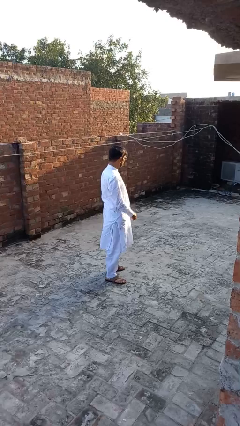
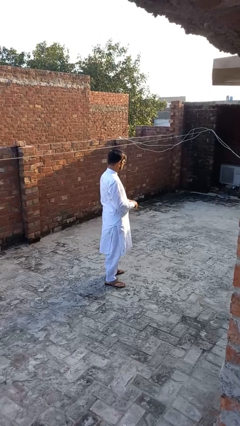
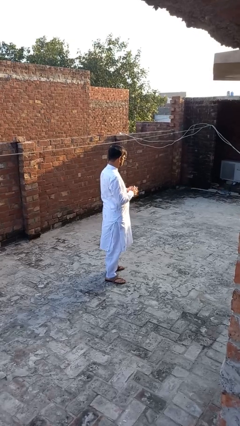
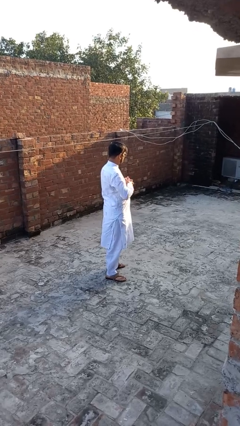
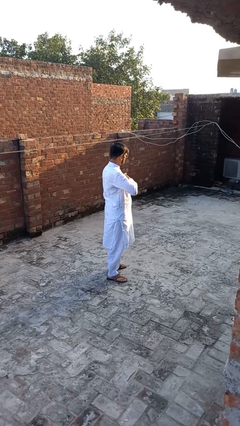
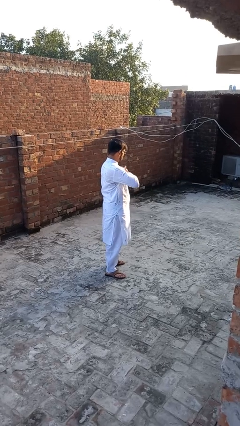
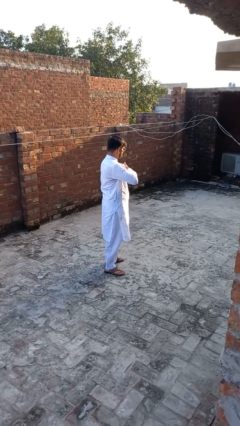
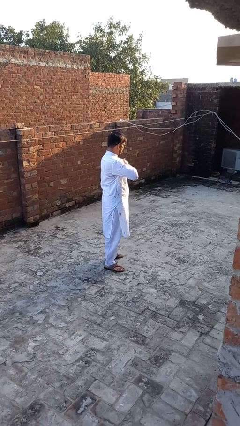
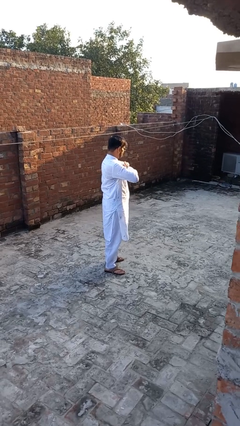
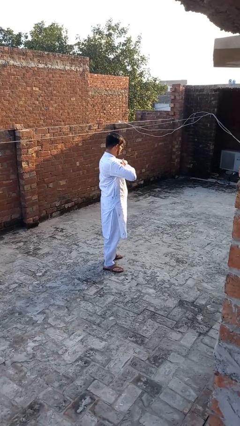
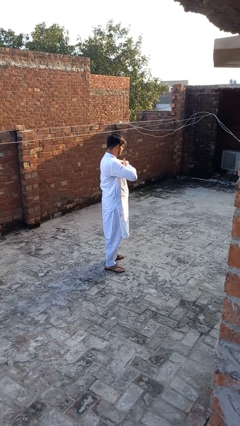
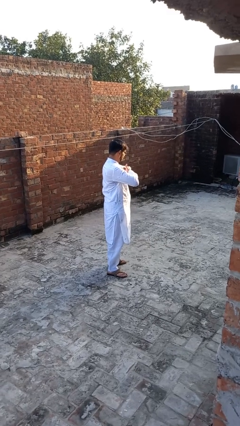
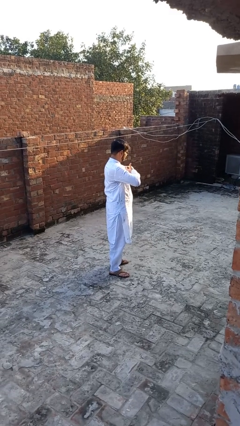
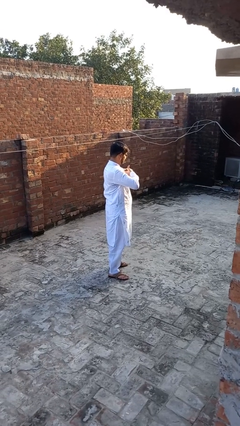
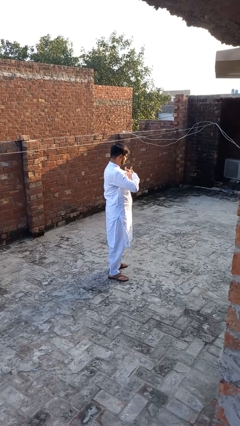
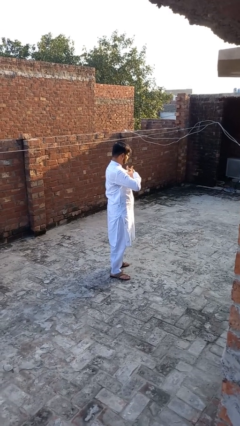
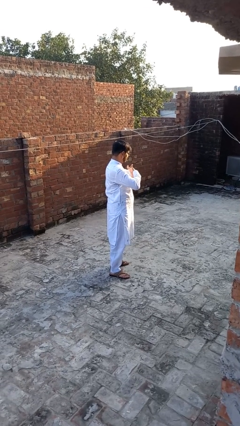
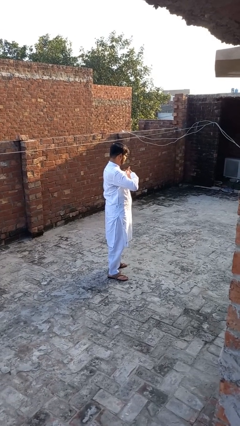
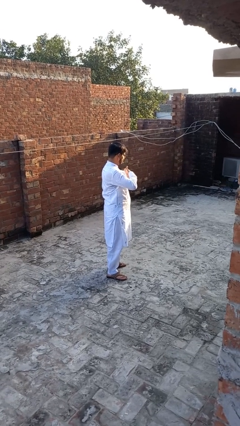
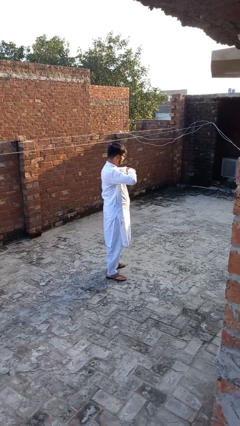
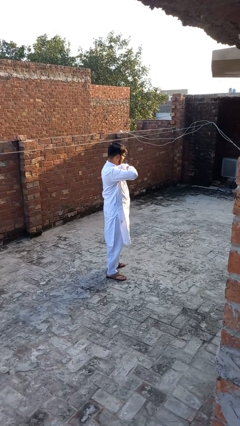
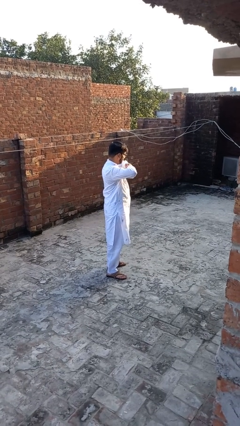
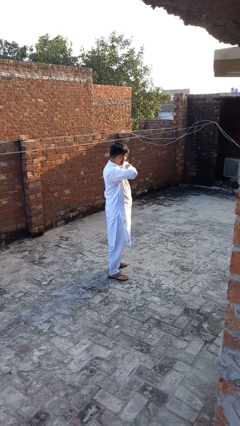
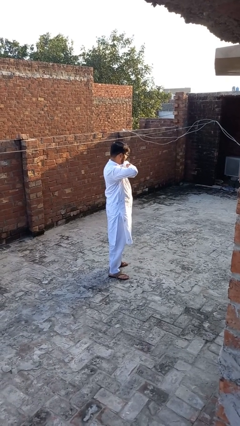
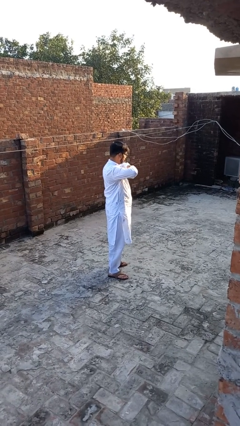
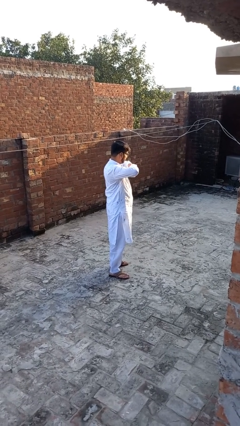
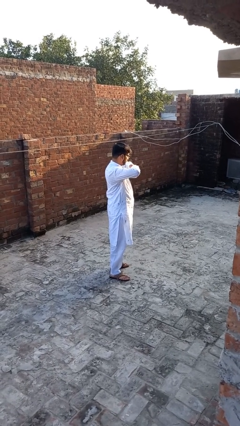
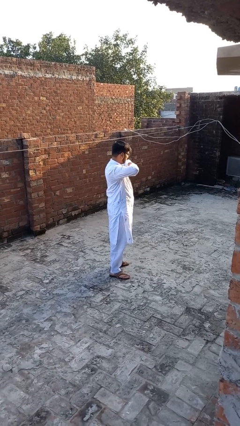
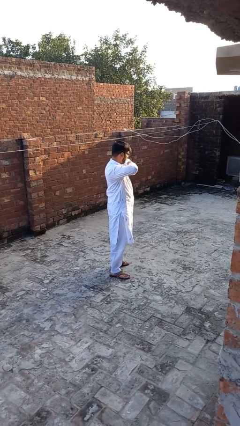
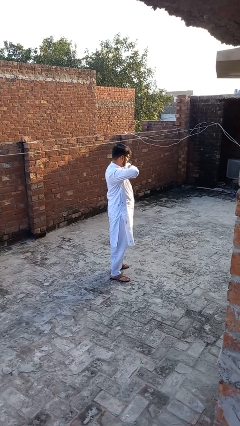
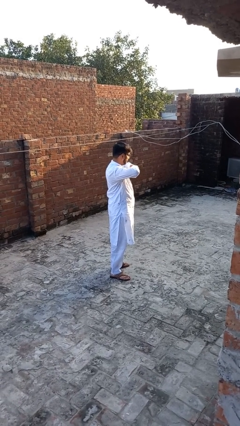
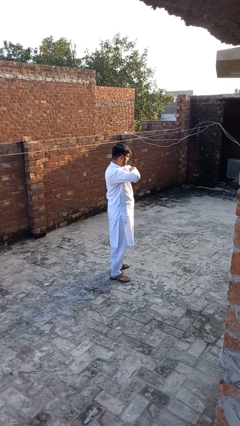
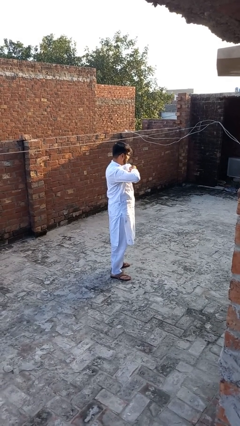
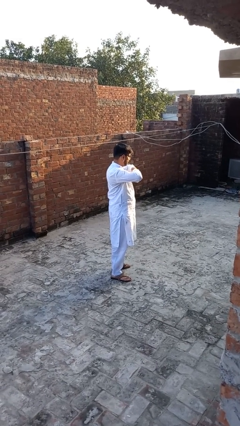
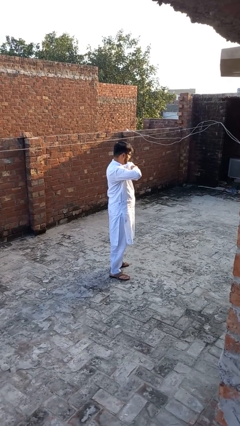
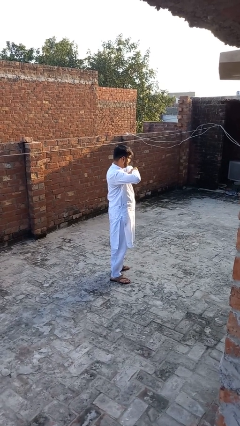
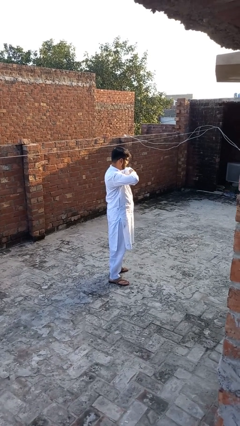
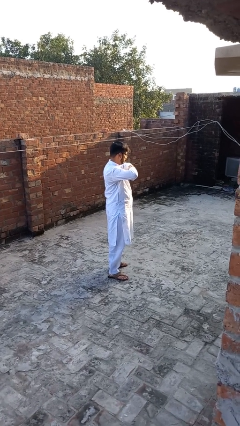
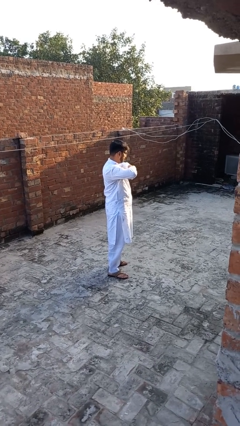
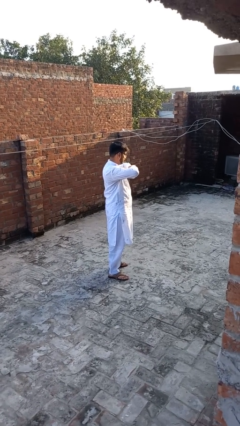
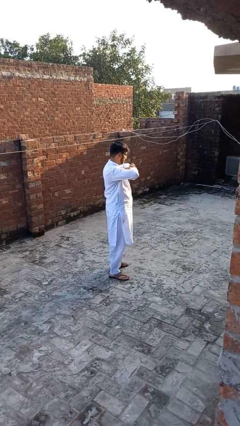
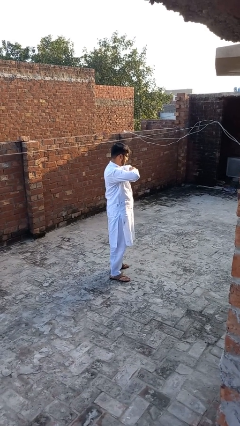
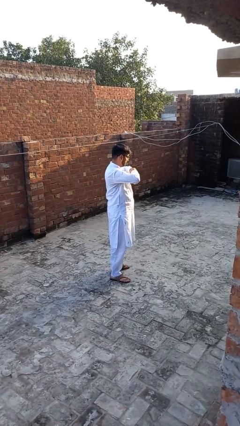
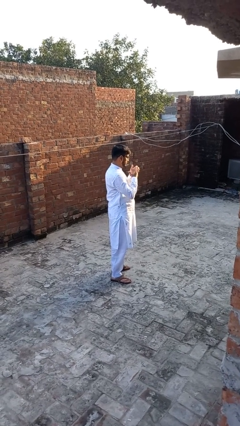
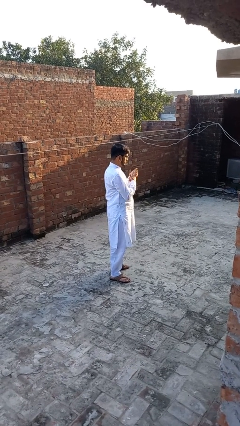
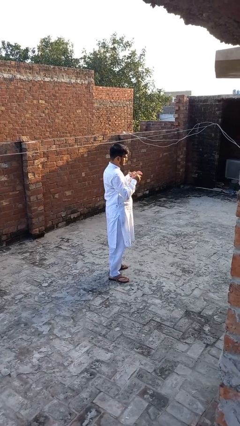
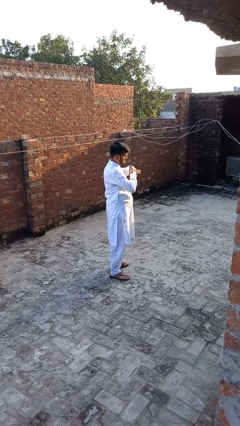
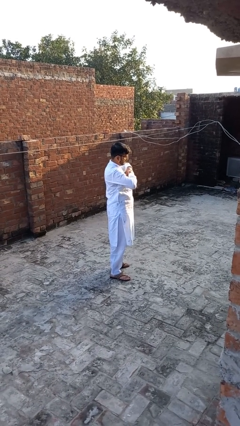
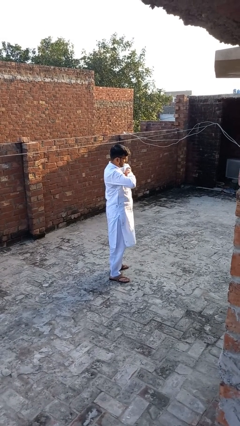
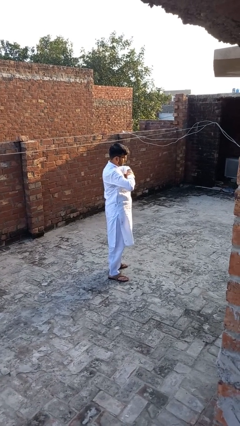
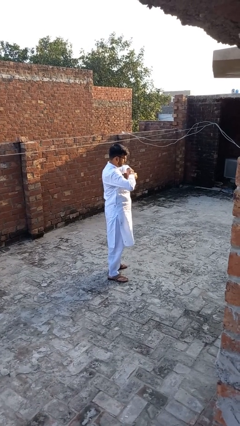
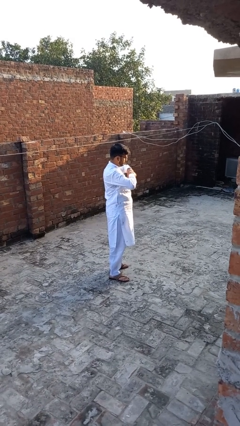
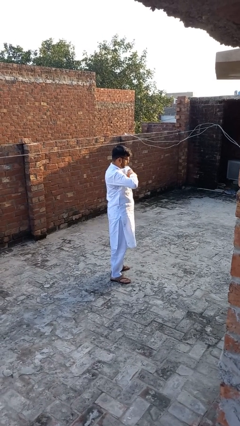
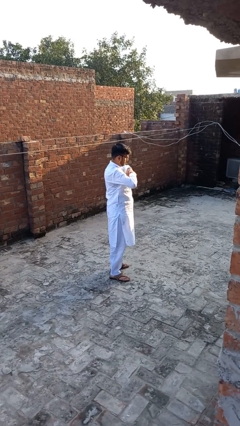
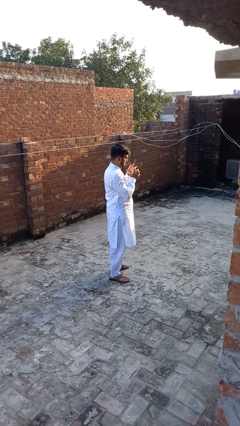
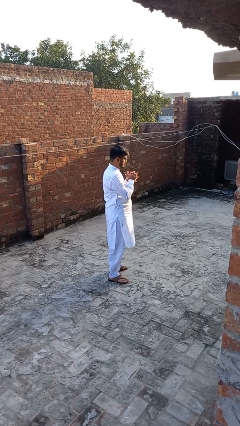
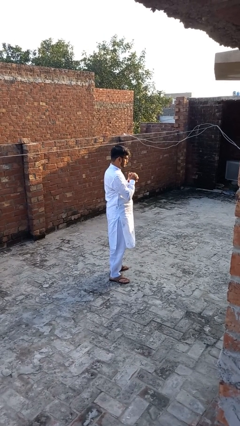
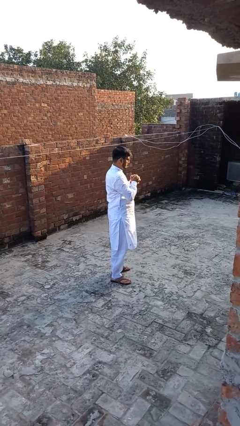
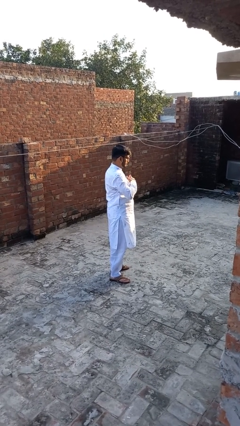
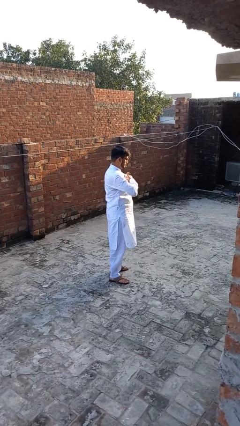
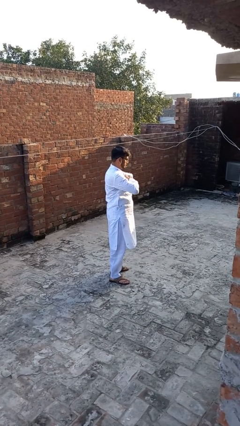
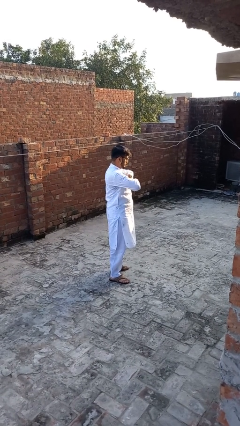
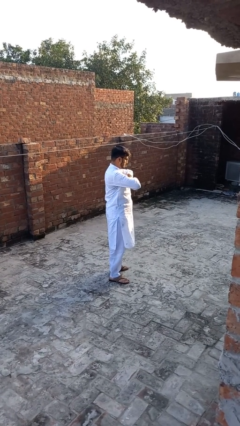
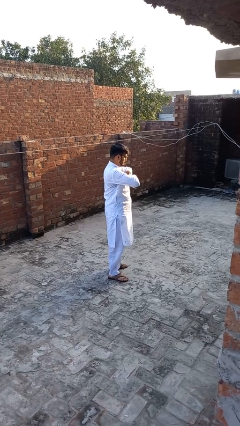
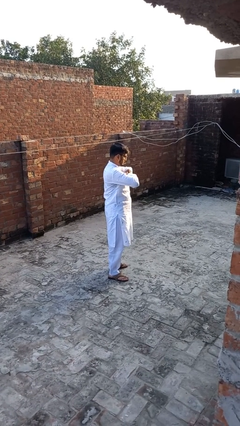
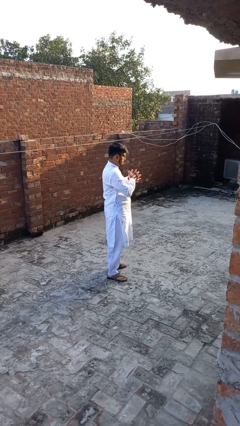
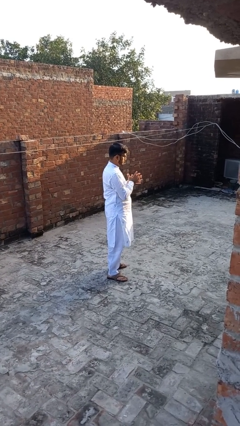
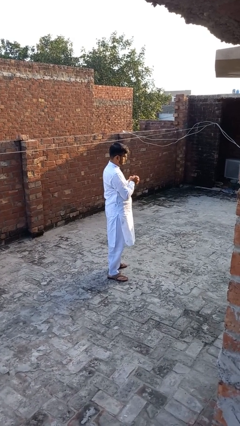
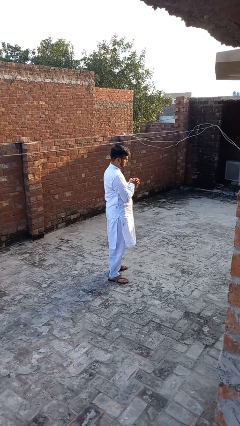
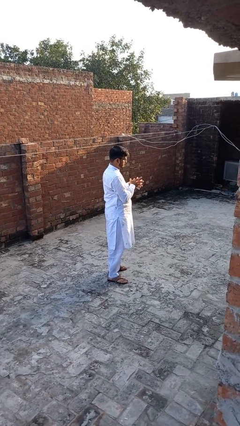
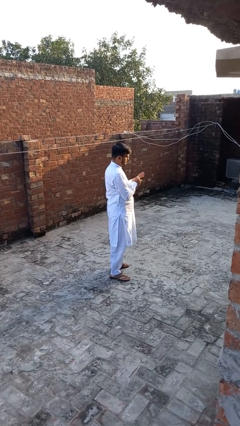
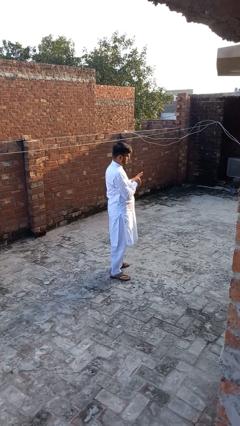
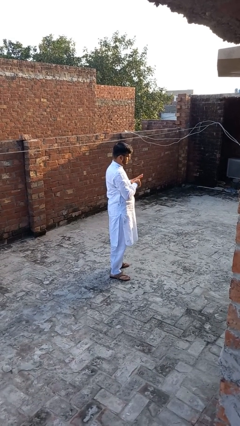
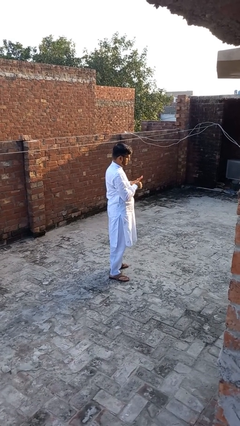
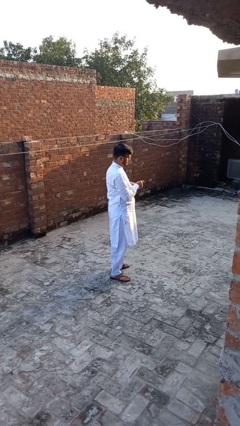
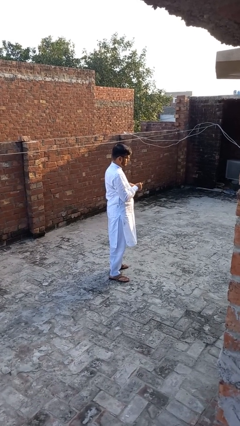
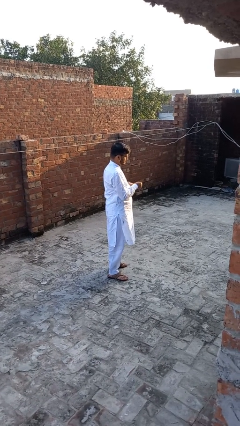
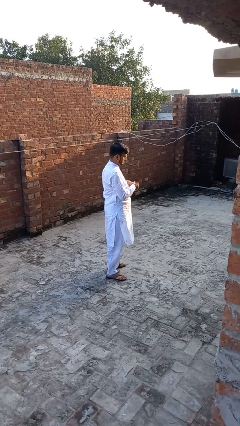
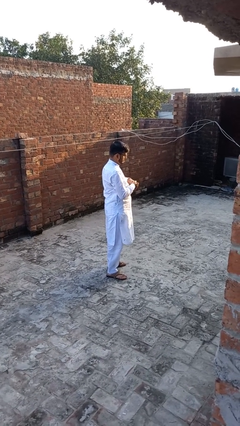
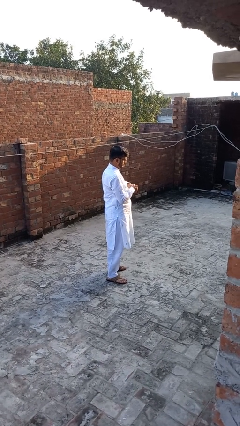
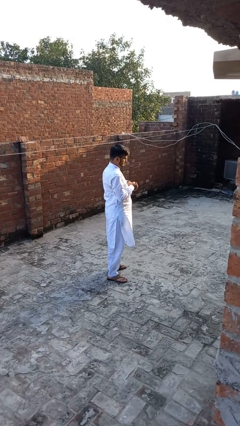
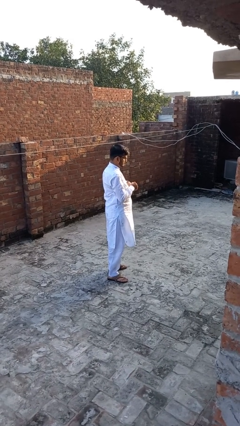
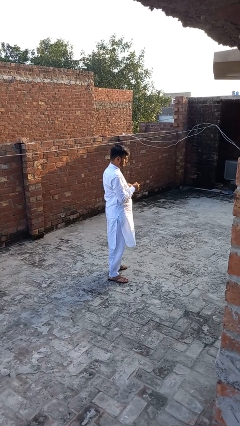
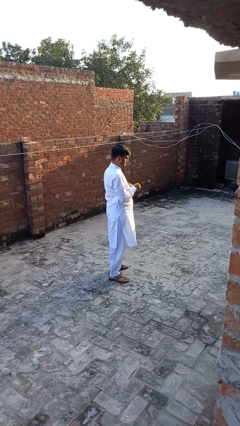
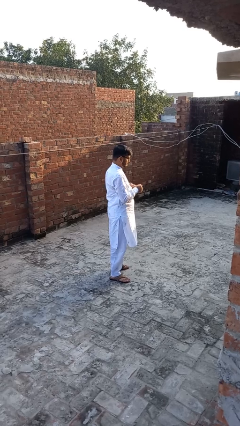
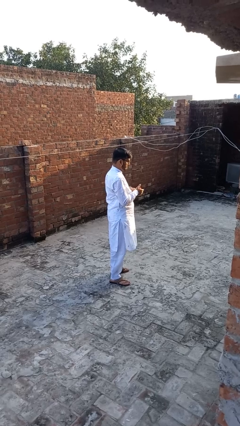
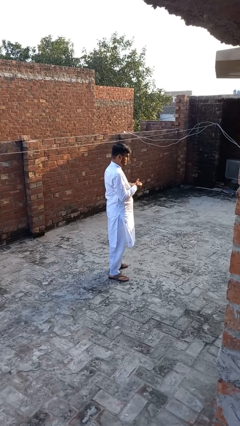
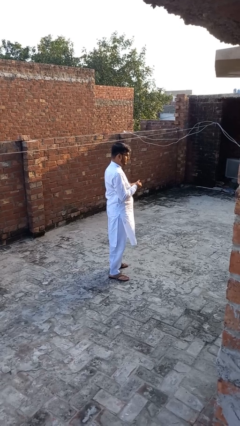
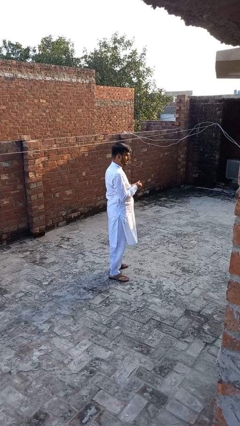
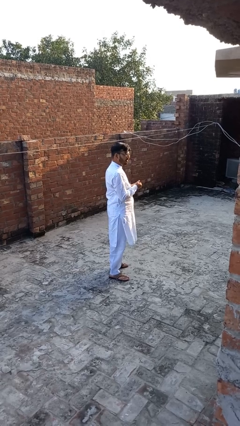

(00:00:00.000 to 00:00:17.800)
person cracks knuckles

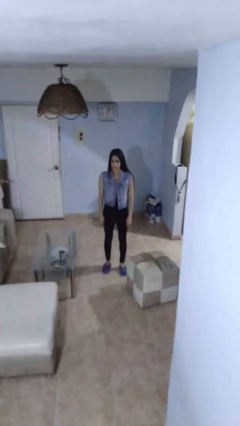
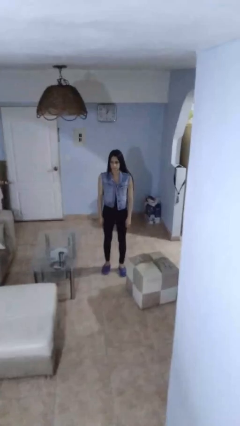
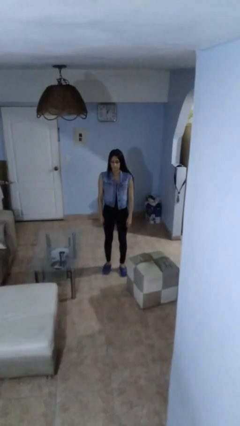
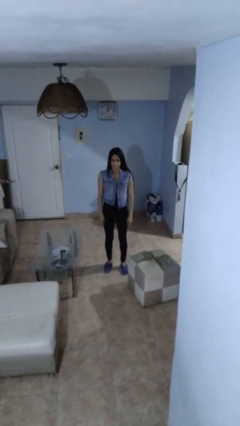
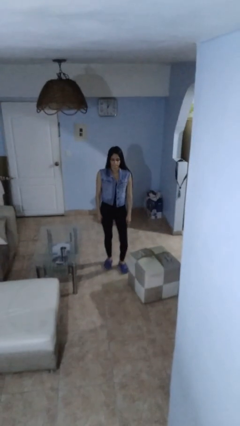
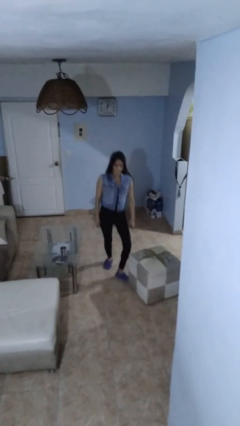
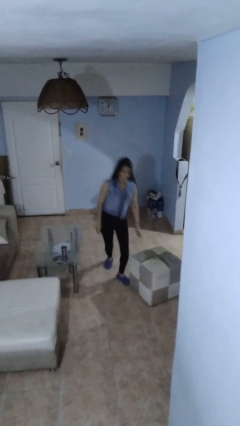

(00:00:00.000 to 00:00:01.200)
person trips on object on floor
